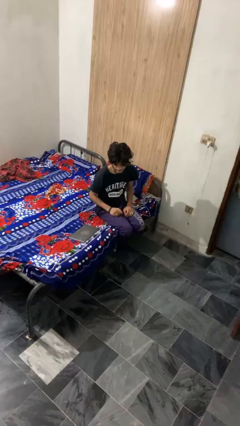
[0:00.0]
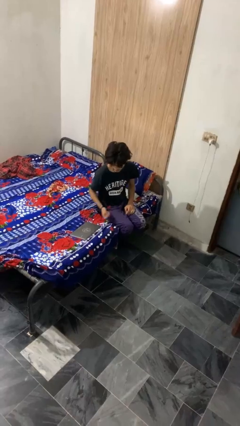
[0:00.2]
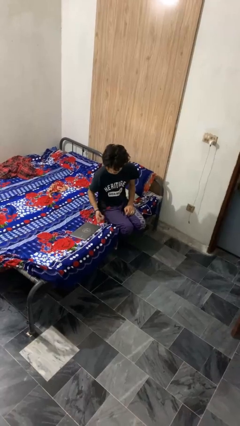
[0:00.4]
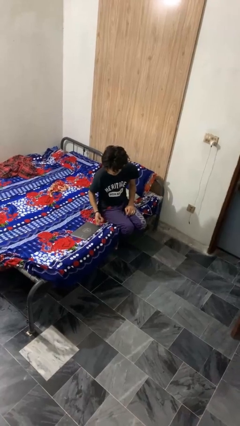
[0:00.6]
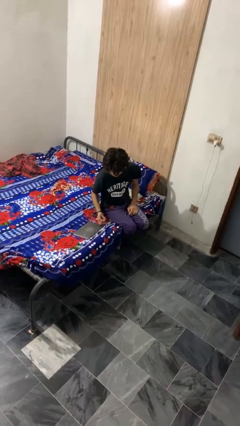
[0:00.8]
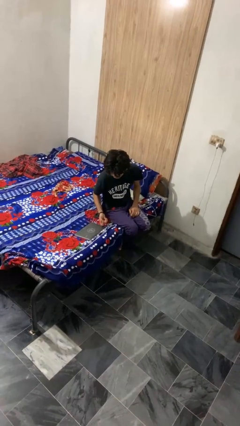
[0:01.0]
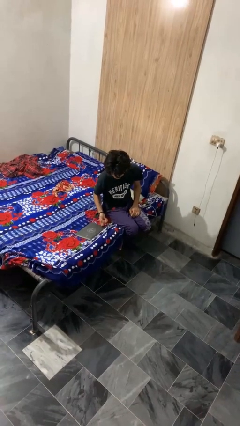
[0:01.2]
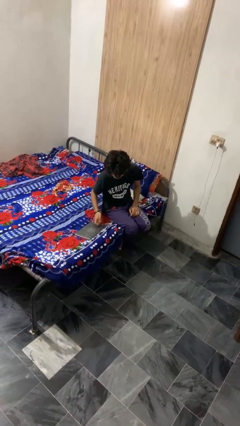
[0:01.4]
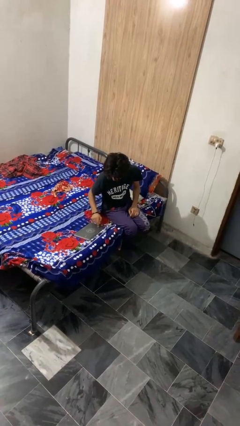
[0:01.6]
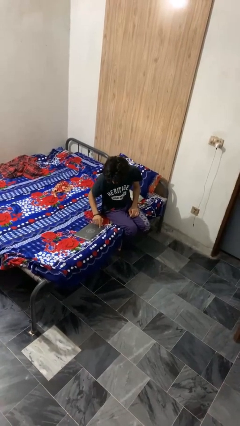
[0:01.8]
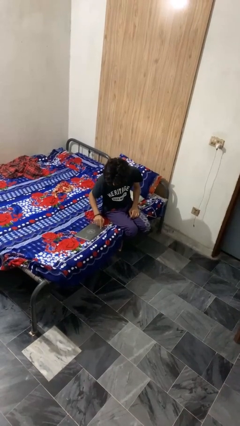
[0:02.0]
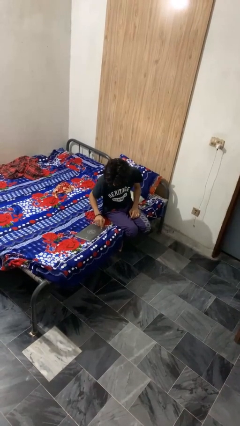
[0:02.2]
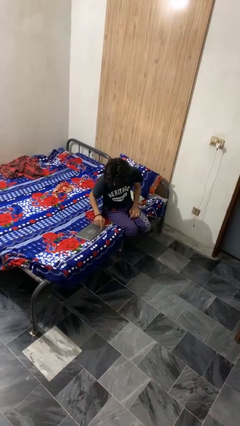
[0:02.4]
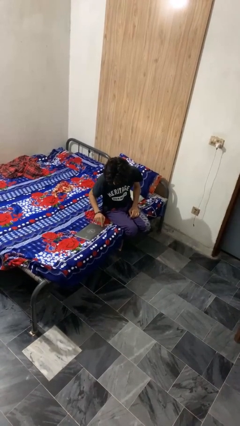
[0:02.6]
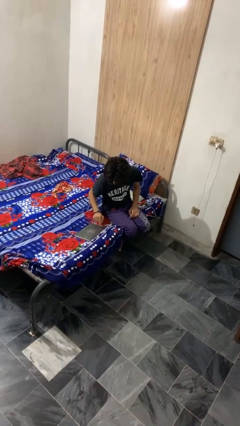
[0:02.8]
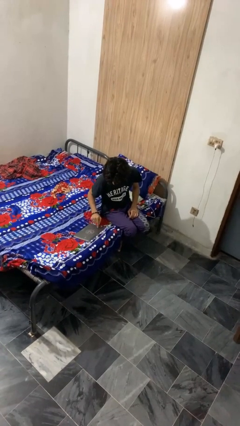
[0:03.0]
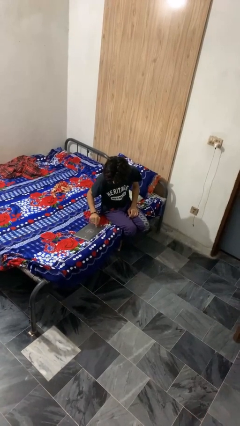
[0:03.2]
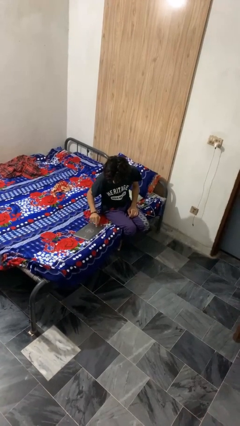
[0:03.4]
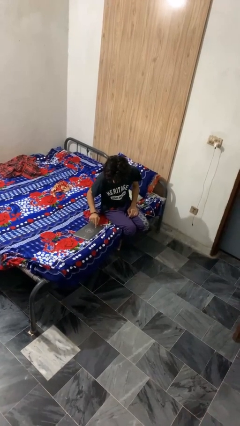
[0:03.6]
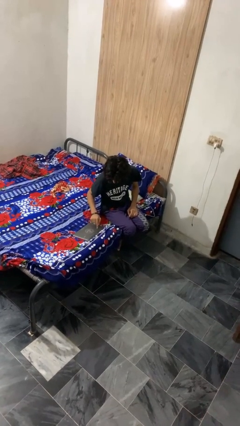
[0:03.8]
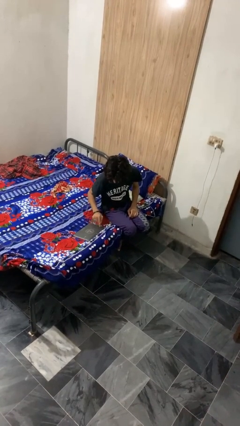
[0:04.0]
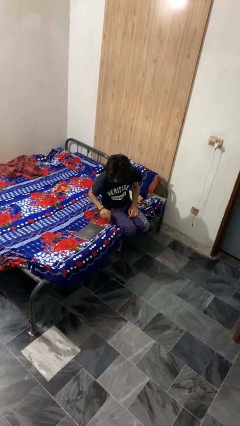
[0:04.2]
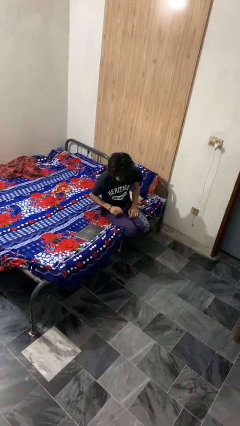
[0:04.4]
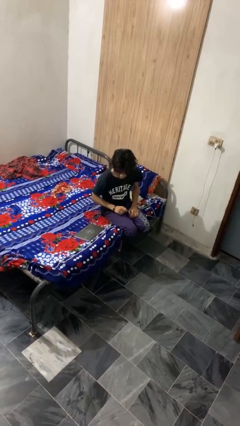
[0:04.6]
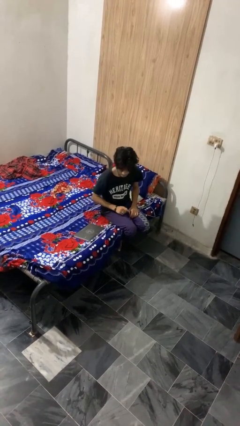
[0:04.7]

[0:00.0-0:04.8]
person taps object with finger

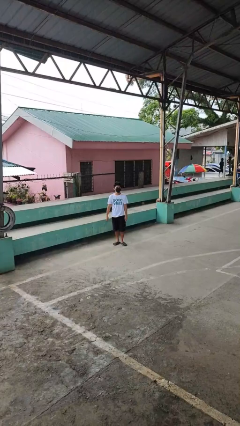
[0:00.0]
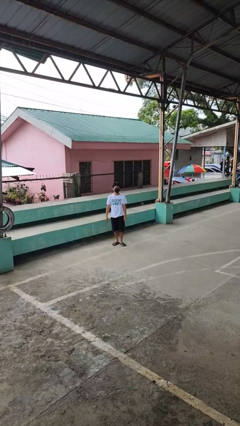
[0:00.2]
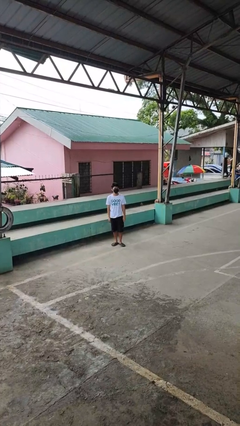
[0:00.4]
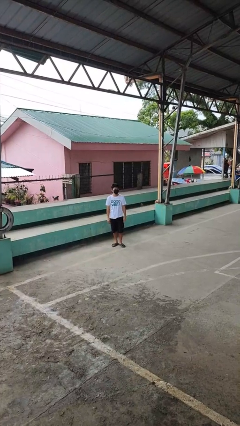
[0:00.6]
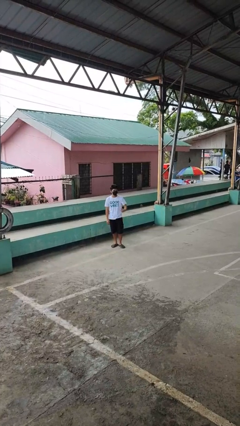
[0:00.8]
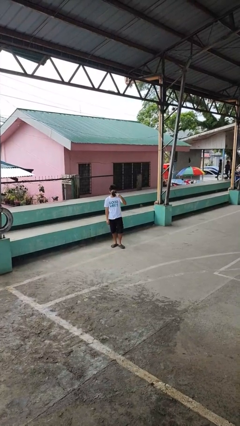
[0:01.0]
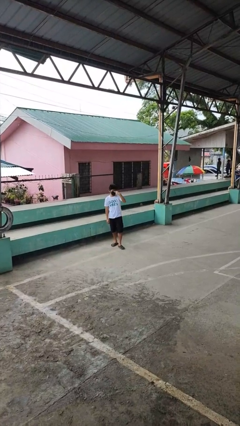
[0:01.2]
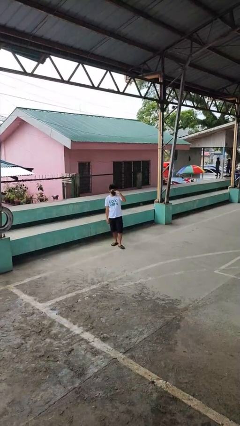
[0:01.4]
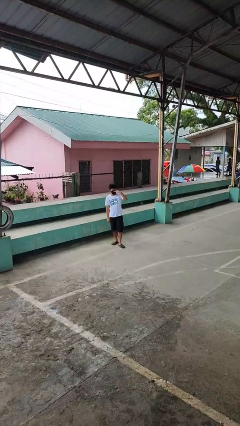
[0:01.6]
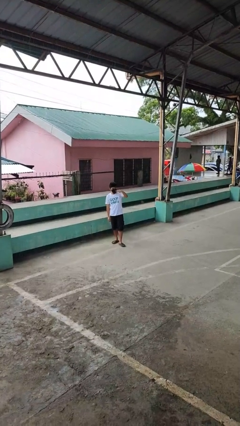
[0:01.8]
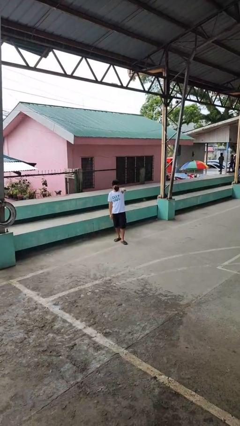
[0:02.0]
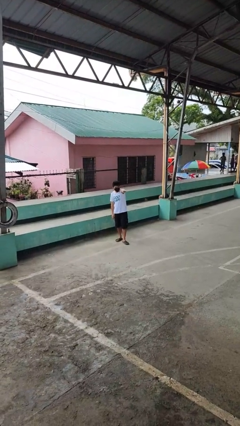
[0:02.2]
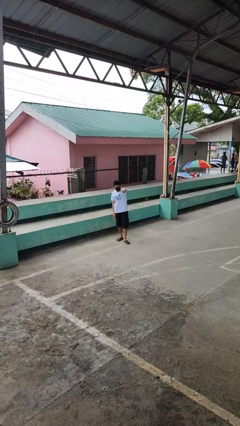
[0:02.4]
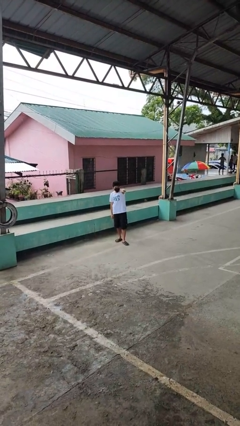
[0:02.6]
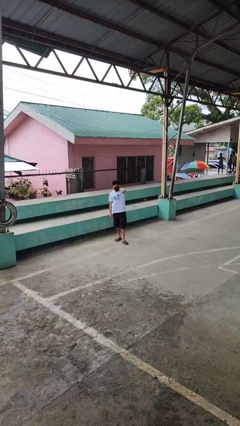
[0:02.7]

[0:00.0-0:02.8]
person gestures watch closely

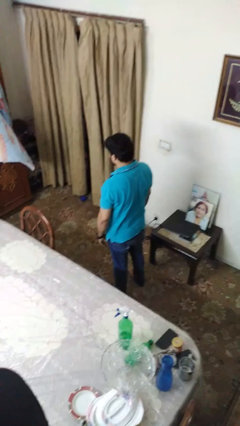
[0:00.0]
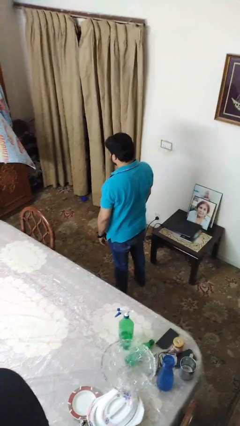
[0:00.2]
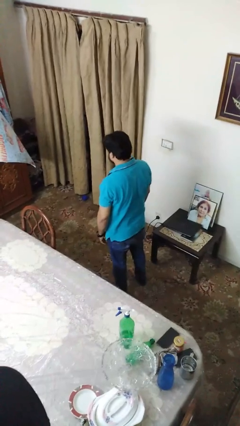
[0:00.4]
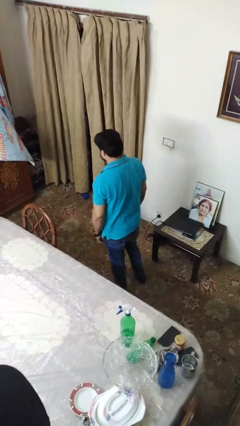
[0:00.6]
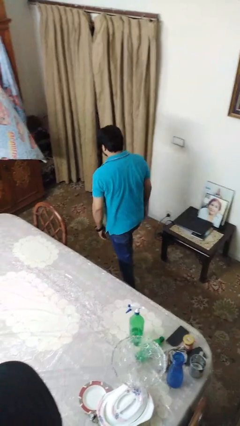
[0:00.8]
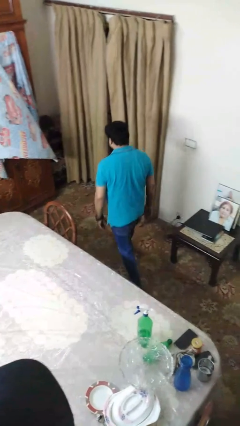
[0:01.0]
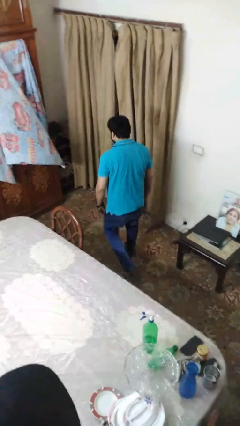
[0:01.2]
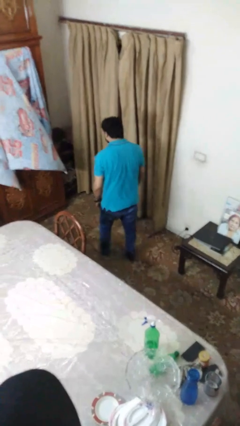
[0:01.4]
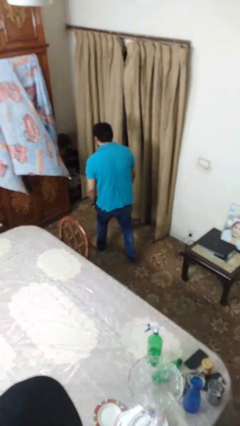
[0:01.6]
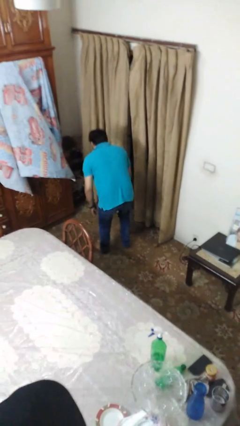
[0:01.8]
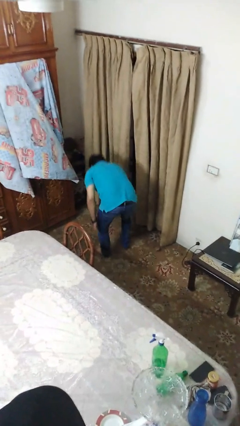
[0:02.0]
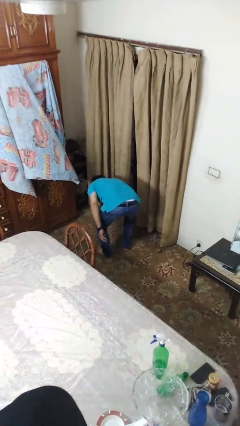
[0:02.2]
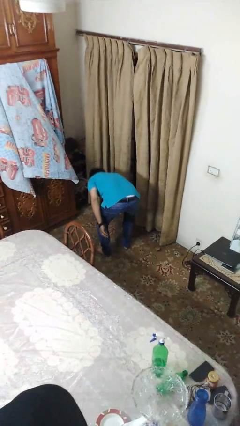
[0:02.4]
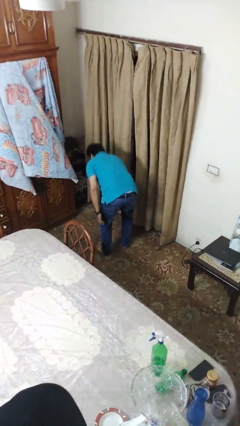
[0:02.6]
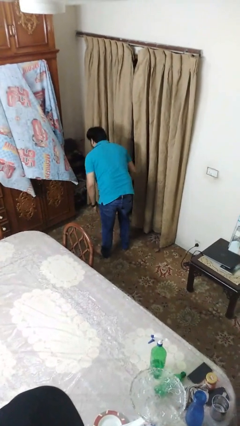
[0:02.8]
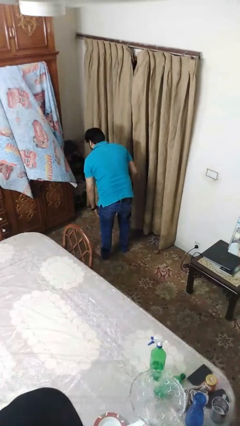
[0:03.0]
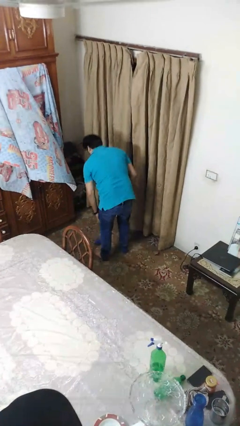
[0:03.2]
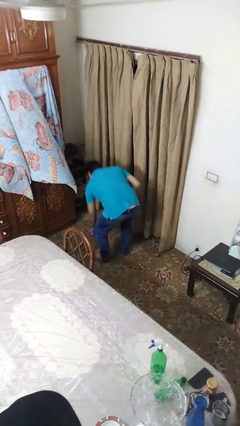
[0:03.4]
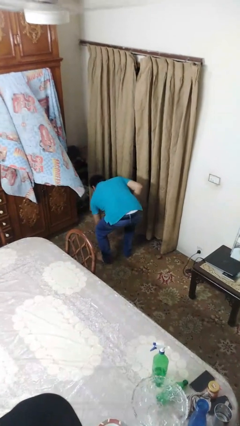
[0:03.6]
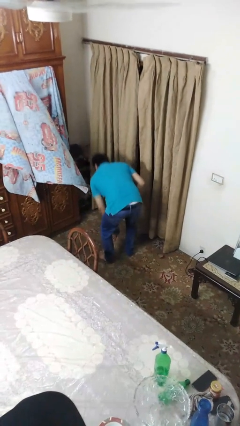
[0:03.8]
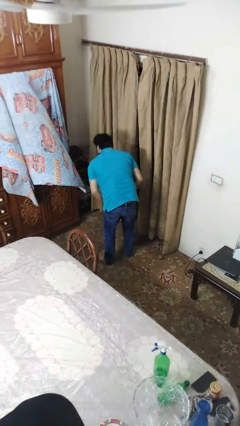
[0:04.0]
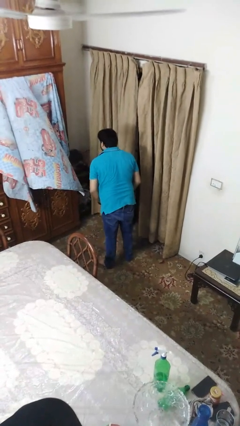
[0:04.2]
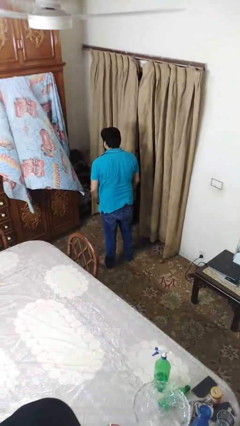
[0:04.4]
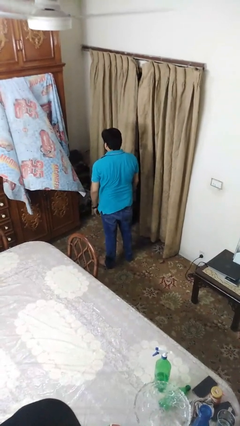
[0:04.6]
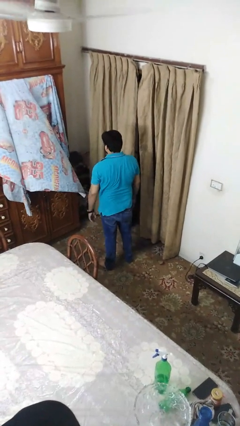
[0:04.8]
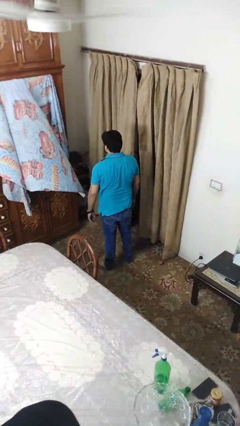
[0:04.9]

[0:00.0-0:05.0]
person picks up object from floor

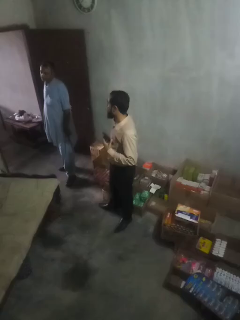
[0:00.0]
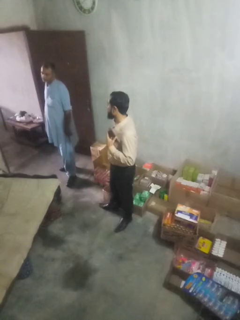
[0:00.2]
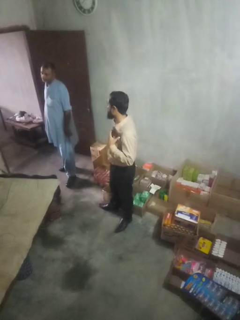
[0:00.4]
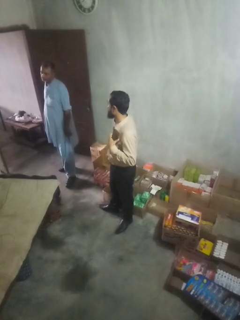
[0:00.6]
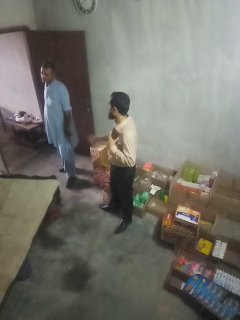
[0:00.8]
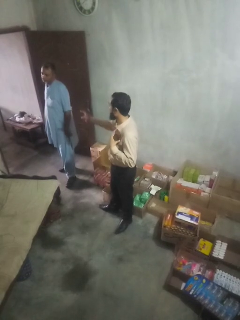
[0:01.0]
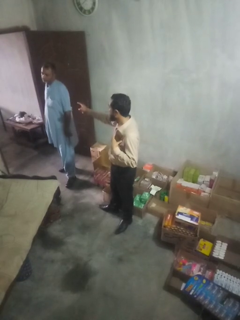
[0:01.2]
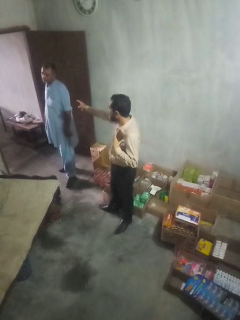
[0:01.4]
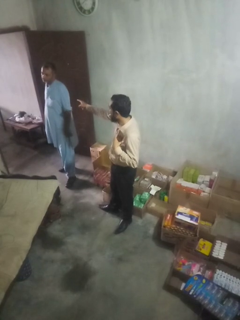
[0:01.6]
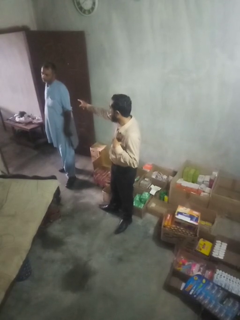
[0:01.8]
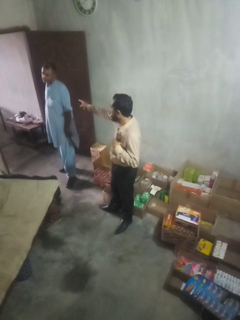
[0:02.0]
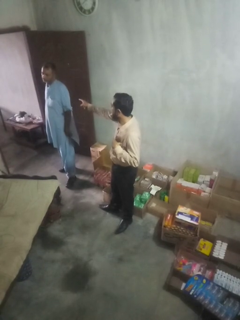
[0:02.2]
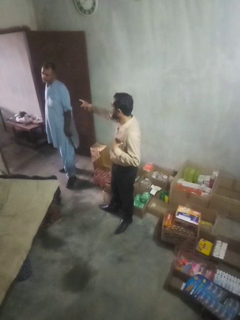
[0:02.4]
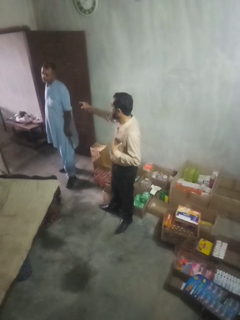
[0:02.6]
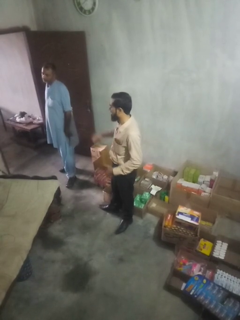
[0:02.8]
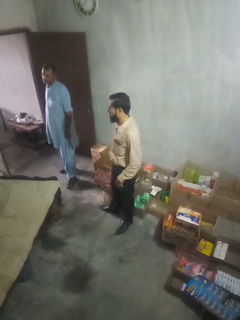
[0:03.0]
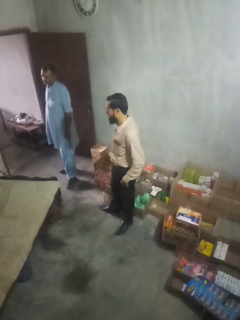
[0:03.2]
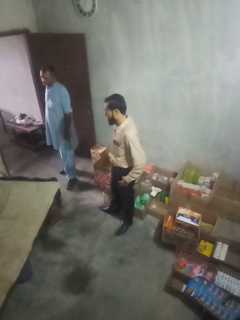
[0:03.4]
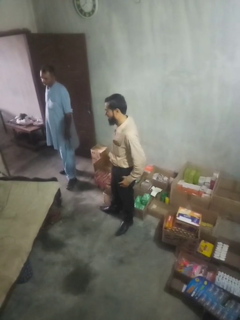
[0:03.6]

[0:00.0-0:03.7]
person points at person

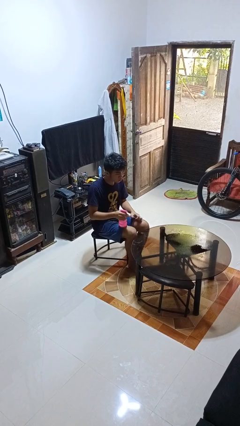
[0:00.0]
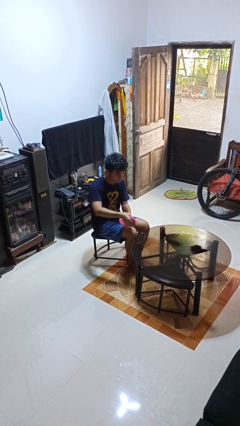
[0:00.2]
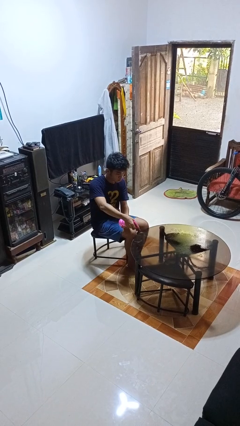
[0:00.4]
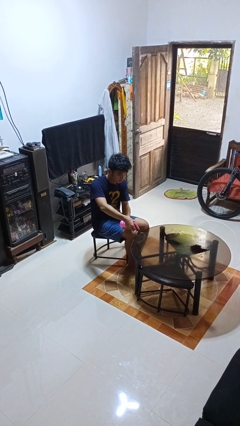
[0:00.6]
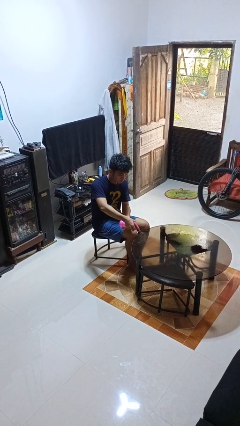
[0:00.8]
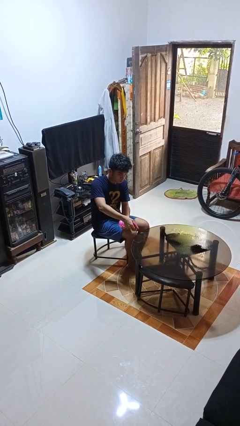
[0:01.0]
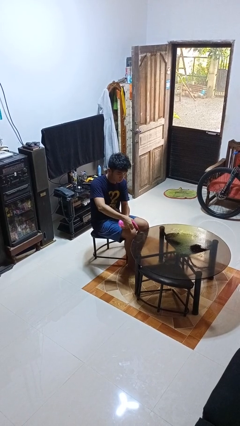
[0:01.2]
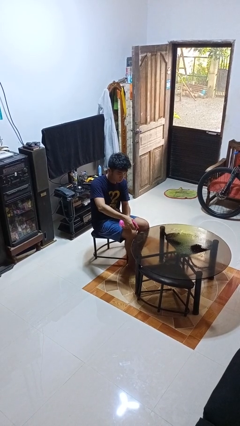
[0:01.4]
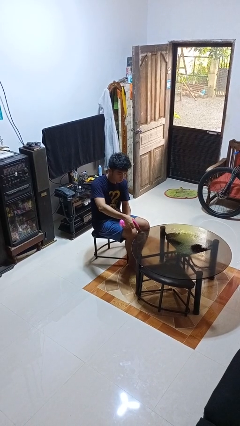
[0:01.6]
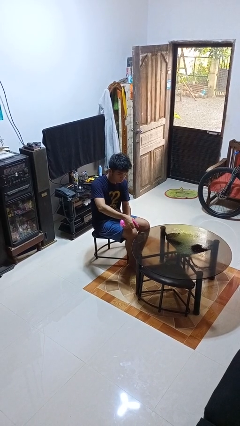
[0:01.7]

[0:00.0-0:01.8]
person sprays from bottle

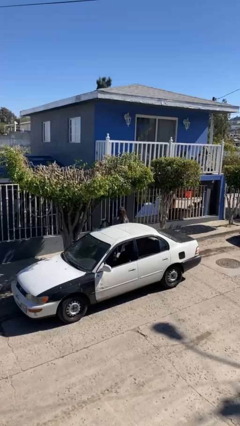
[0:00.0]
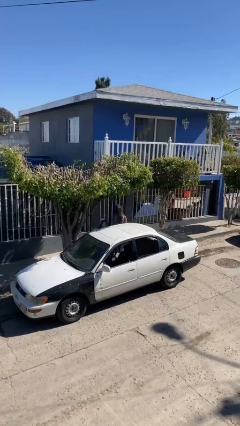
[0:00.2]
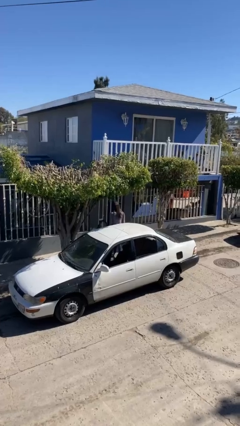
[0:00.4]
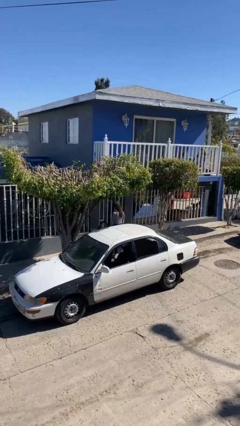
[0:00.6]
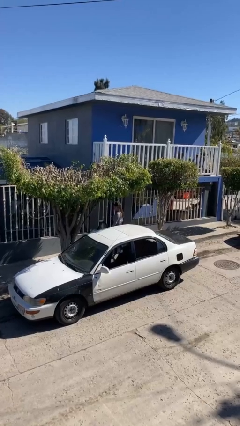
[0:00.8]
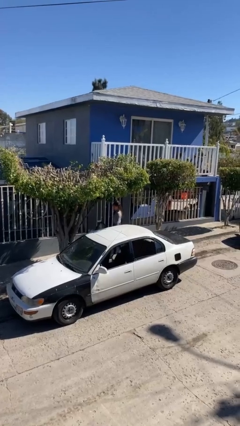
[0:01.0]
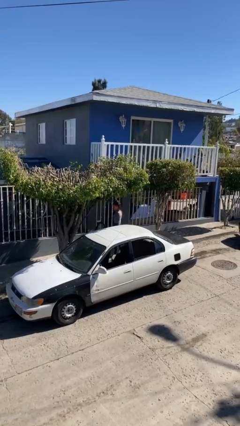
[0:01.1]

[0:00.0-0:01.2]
person exits car
